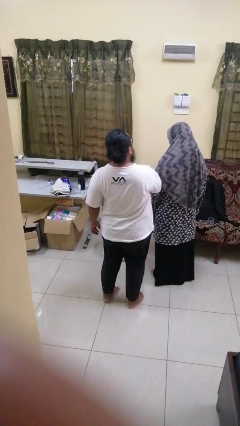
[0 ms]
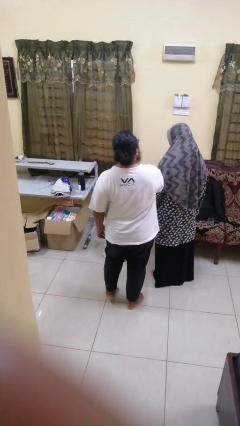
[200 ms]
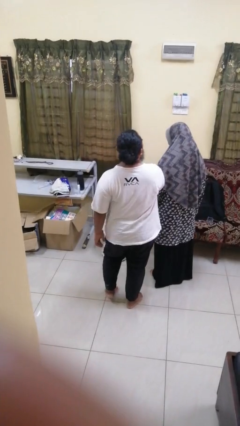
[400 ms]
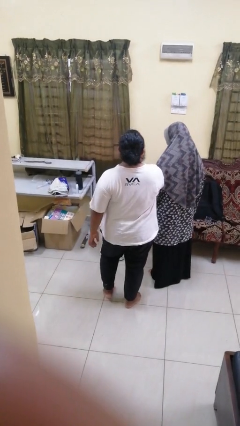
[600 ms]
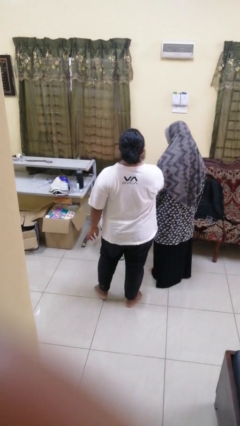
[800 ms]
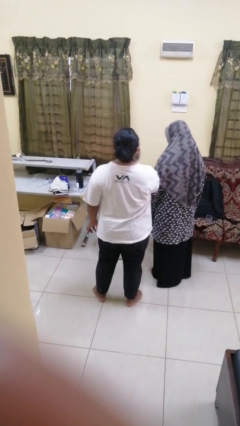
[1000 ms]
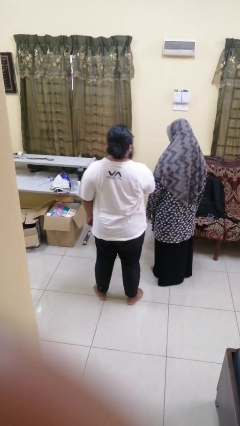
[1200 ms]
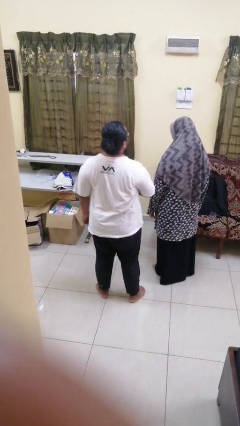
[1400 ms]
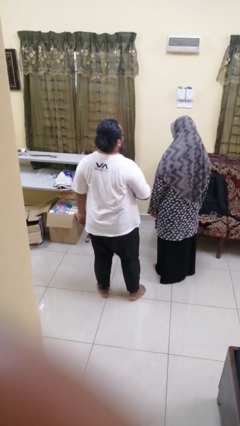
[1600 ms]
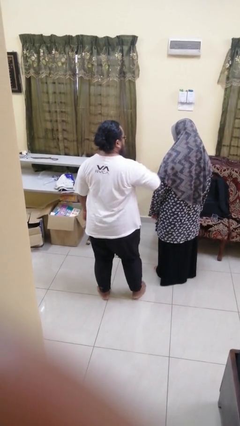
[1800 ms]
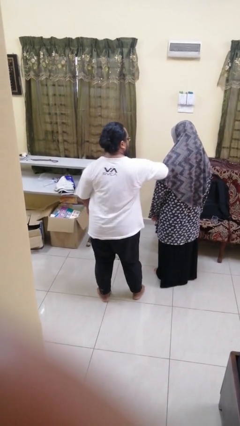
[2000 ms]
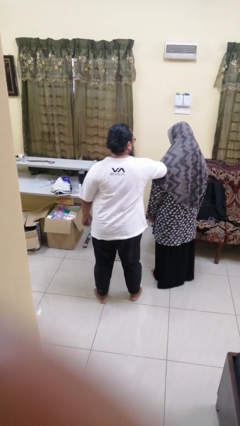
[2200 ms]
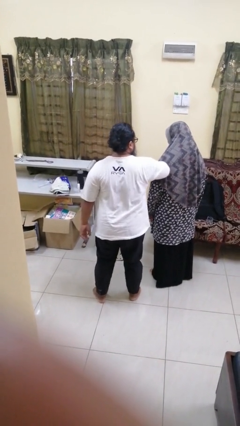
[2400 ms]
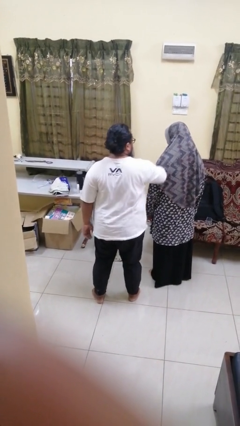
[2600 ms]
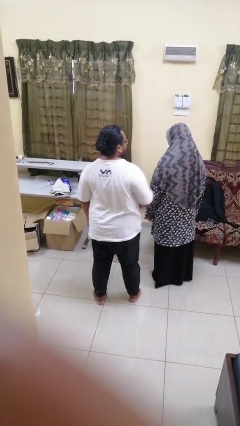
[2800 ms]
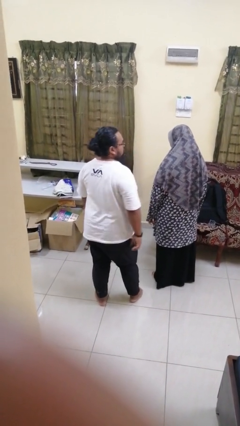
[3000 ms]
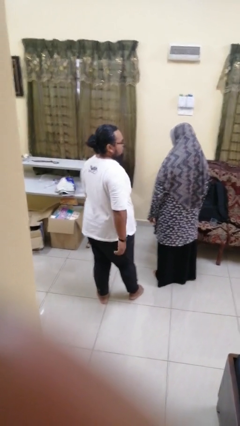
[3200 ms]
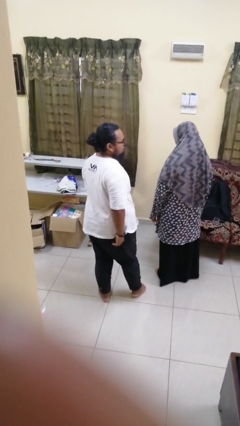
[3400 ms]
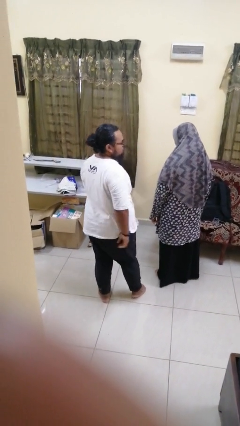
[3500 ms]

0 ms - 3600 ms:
person nudges person with elbow

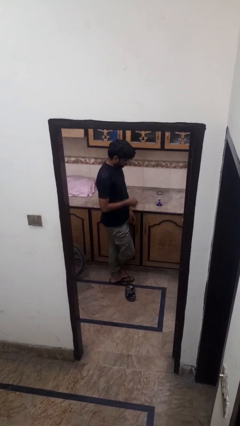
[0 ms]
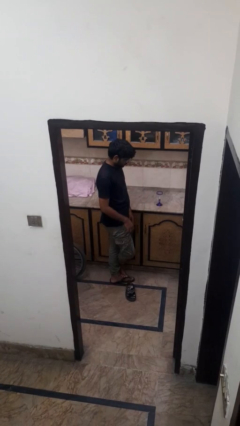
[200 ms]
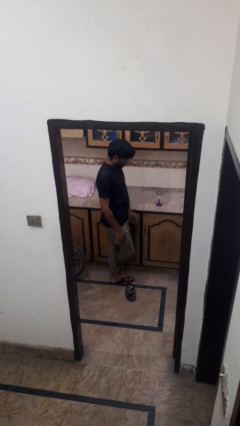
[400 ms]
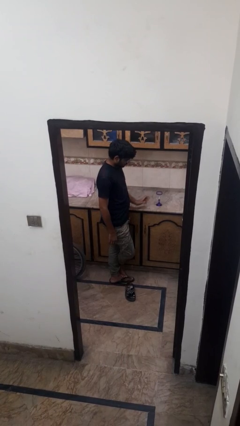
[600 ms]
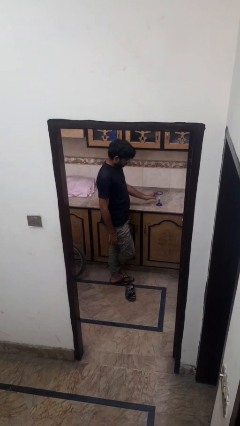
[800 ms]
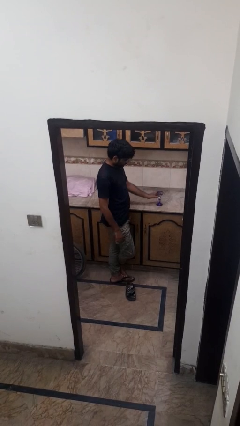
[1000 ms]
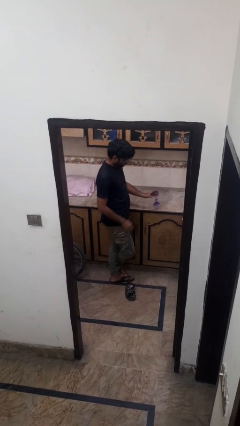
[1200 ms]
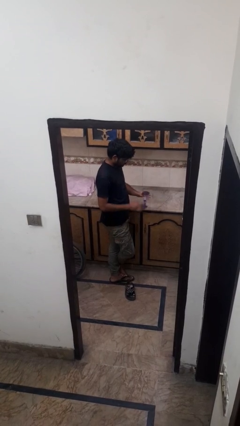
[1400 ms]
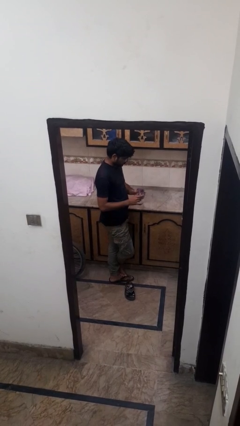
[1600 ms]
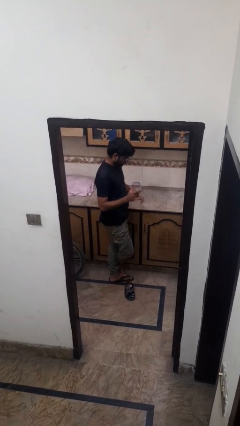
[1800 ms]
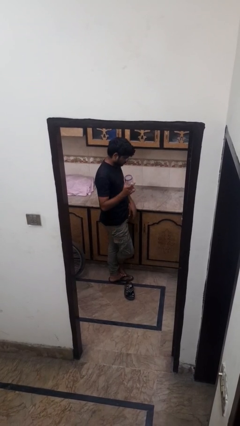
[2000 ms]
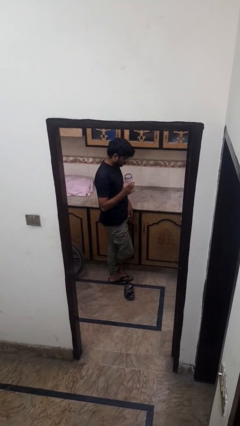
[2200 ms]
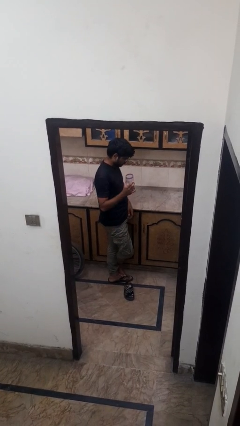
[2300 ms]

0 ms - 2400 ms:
person picks up object from countertop

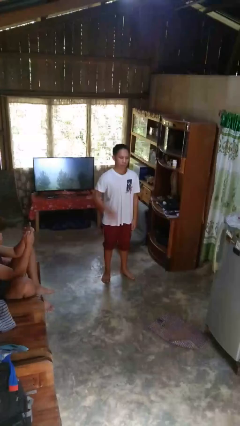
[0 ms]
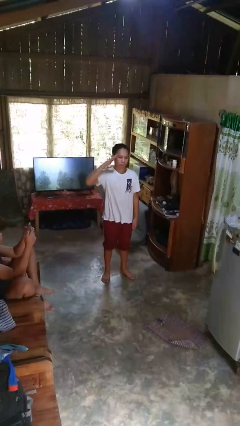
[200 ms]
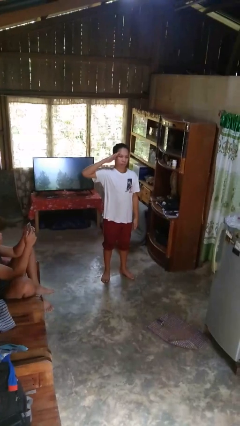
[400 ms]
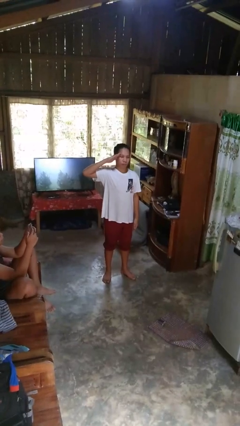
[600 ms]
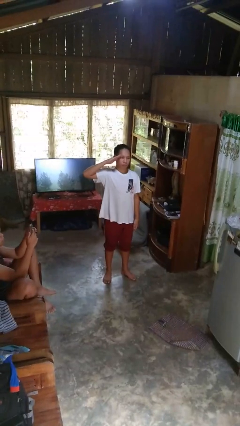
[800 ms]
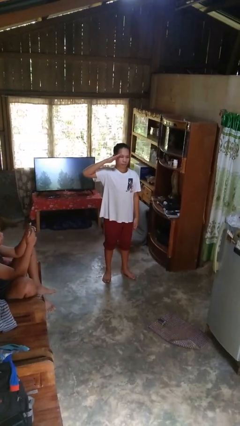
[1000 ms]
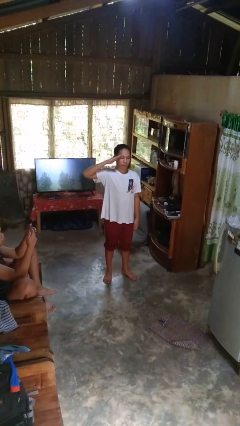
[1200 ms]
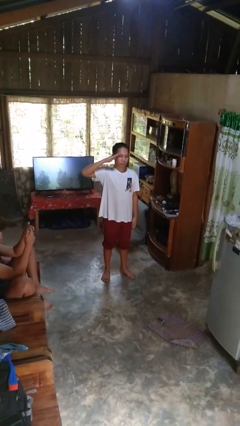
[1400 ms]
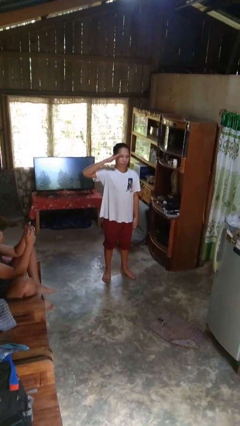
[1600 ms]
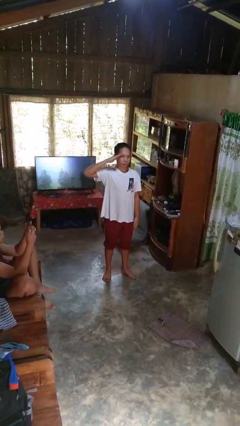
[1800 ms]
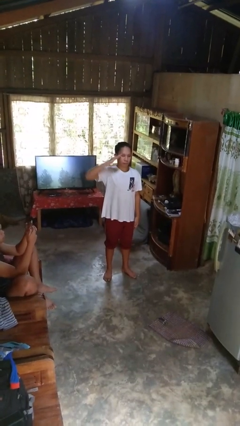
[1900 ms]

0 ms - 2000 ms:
person salutes

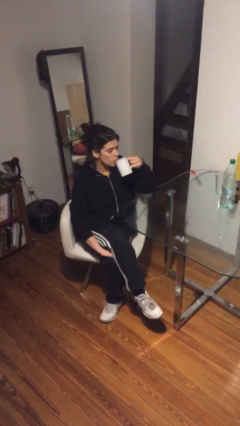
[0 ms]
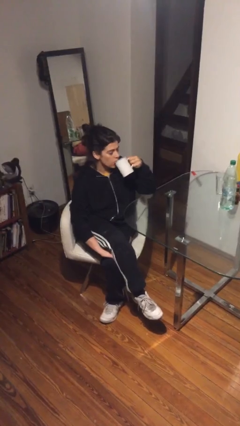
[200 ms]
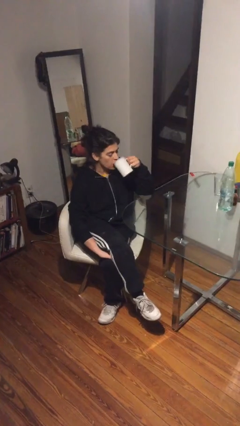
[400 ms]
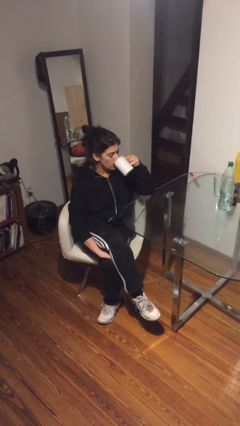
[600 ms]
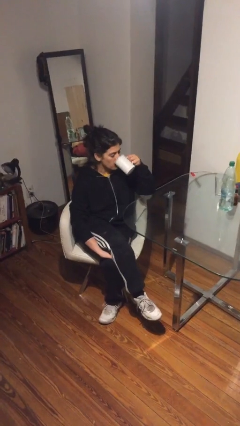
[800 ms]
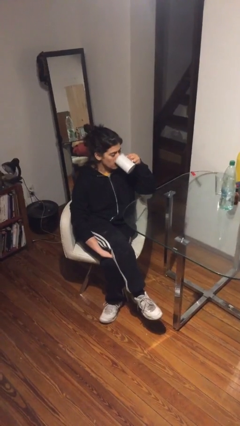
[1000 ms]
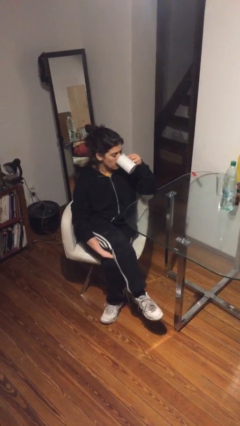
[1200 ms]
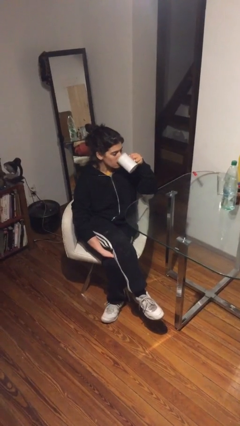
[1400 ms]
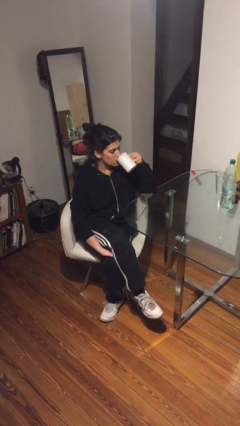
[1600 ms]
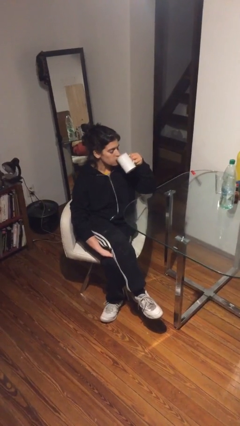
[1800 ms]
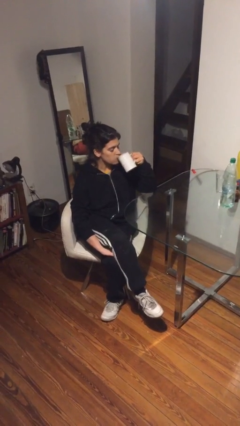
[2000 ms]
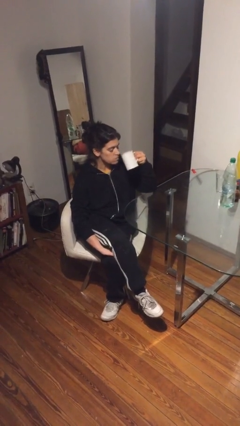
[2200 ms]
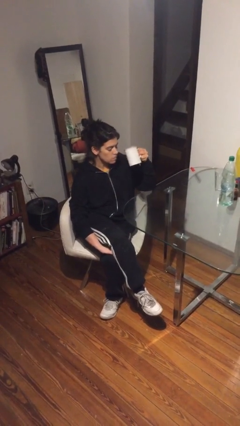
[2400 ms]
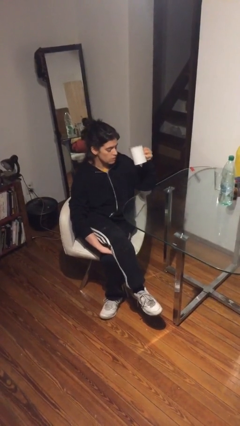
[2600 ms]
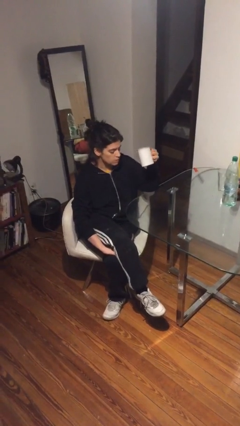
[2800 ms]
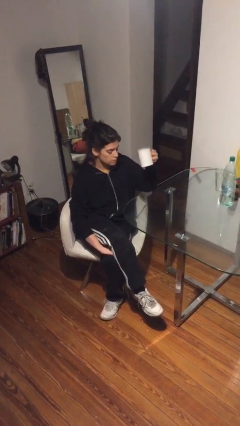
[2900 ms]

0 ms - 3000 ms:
person drinks from mug

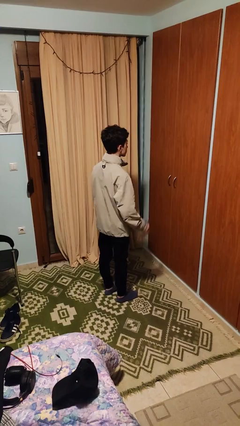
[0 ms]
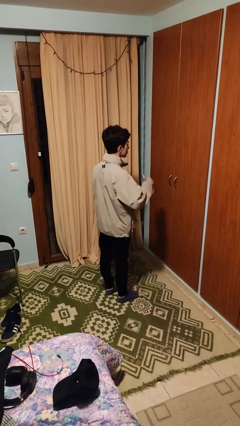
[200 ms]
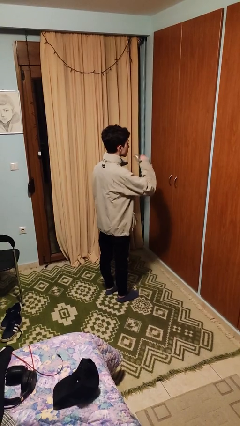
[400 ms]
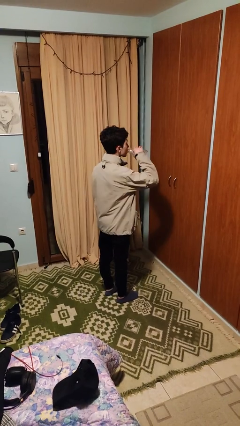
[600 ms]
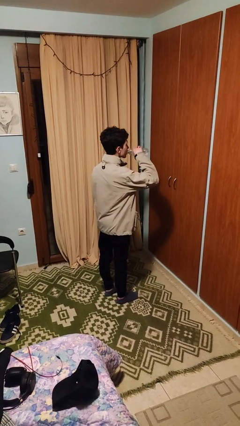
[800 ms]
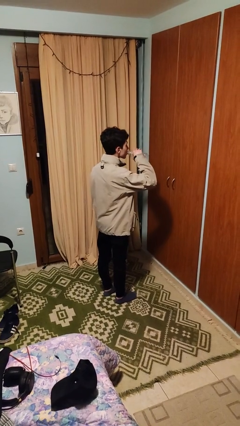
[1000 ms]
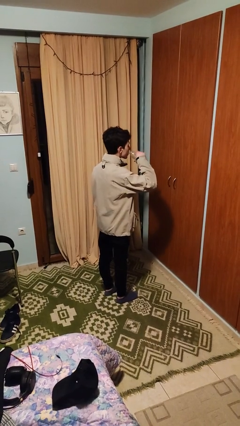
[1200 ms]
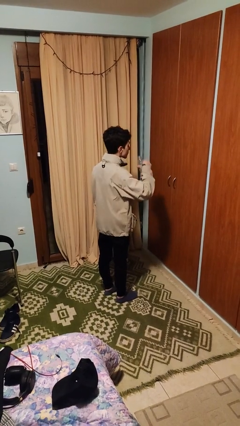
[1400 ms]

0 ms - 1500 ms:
person drinks from bottle

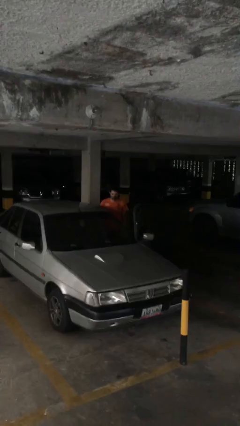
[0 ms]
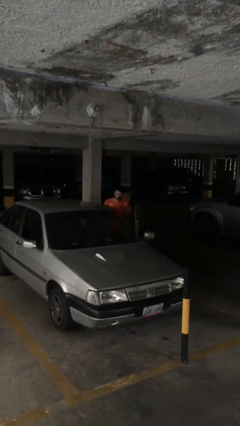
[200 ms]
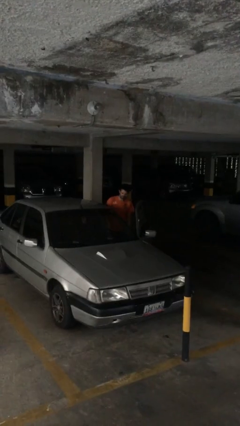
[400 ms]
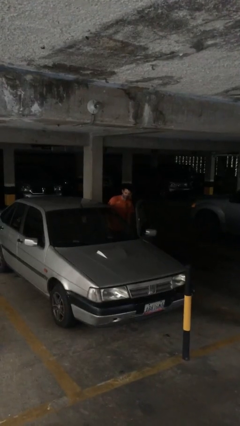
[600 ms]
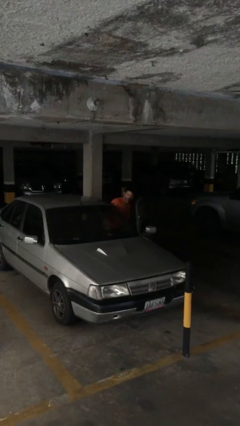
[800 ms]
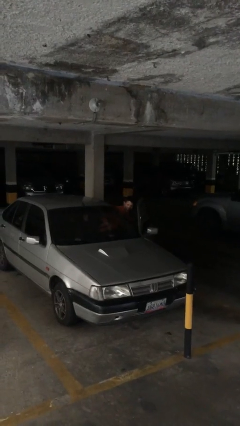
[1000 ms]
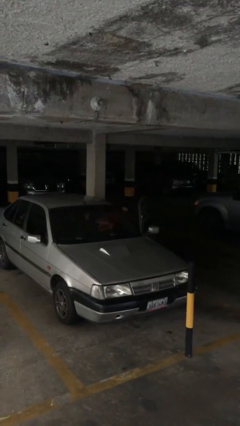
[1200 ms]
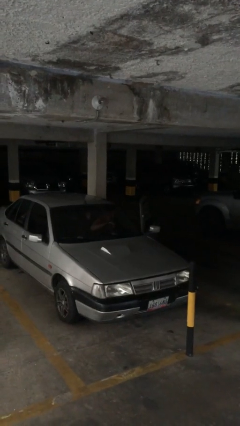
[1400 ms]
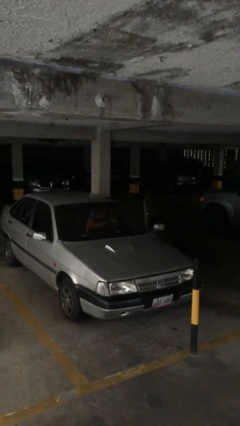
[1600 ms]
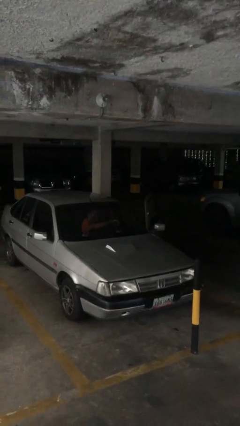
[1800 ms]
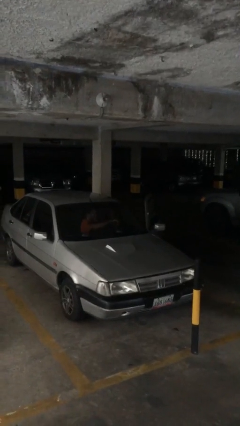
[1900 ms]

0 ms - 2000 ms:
person enters car

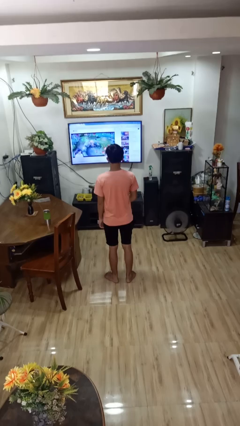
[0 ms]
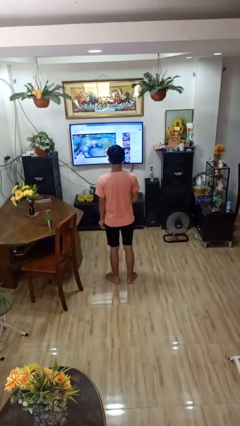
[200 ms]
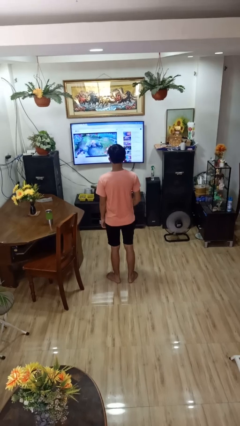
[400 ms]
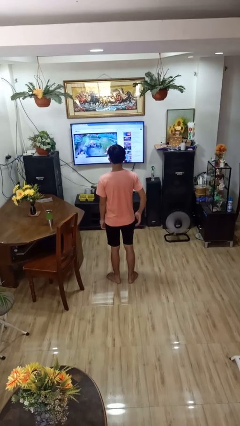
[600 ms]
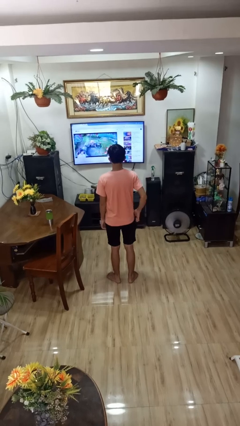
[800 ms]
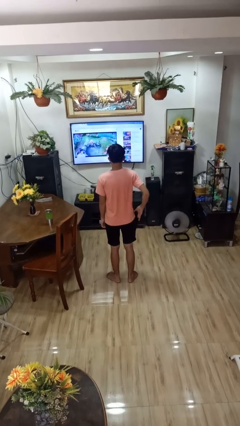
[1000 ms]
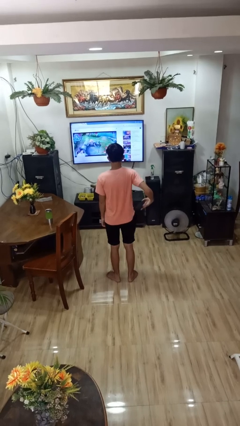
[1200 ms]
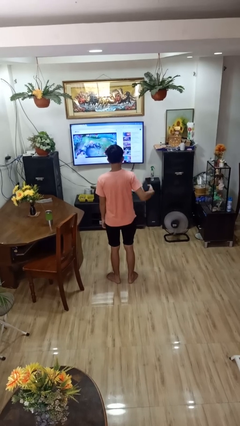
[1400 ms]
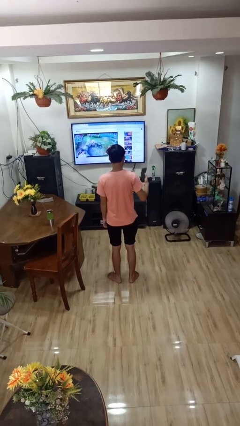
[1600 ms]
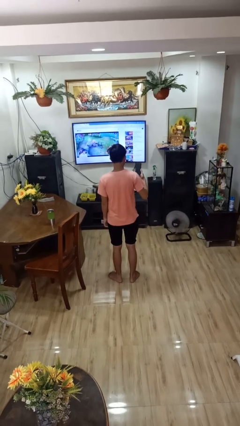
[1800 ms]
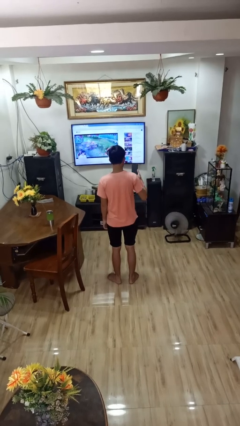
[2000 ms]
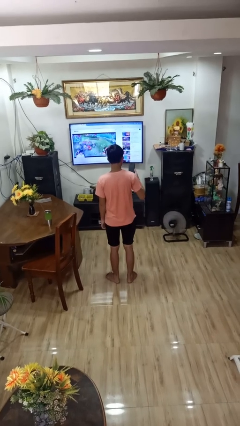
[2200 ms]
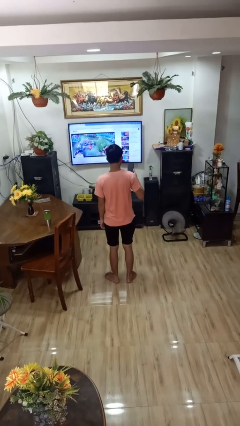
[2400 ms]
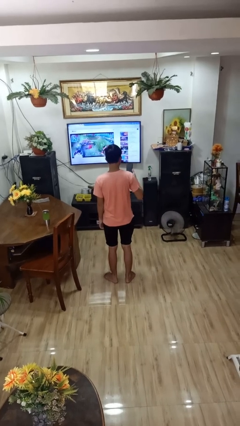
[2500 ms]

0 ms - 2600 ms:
person takes phone from pocket
